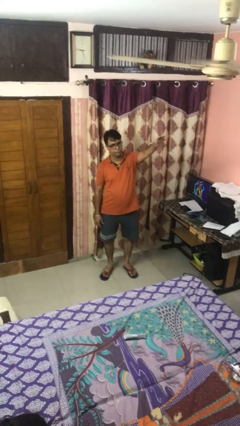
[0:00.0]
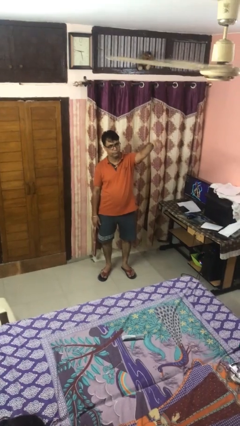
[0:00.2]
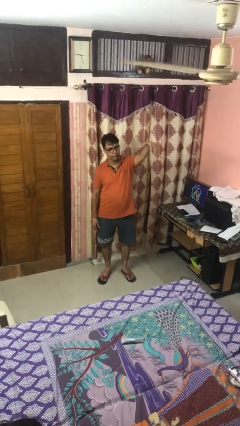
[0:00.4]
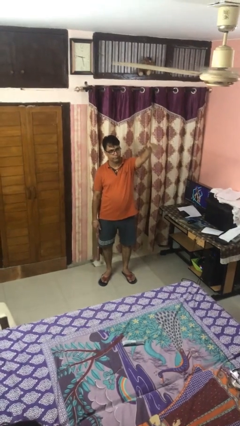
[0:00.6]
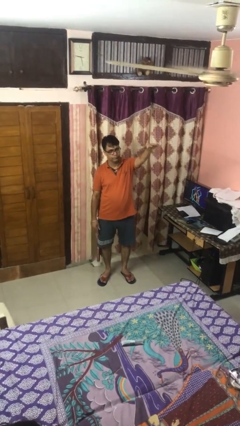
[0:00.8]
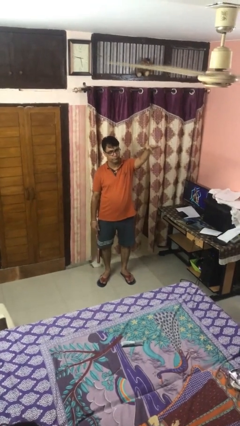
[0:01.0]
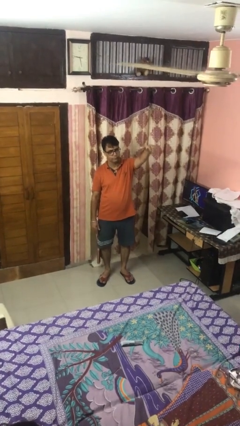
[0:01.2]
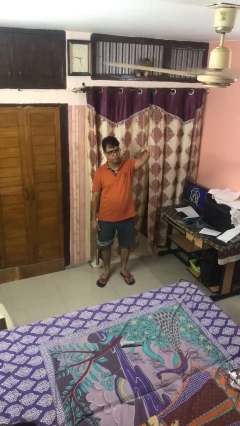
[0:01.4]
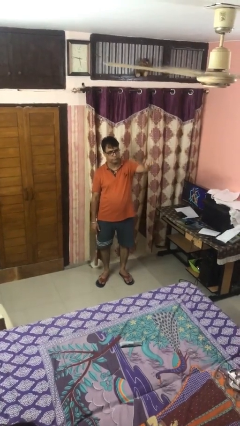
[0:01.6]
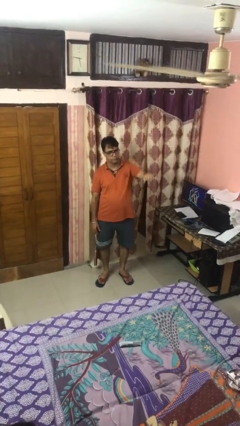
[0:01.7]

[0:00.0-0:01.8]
person gestures come here

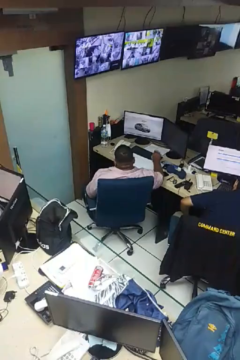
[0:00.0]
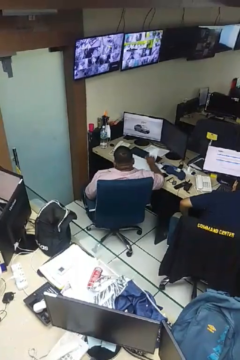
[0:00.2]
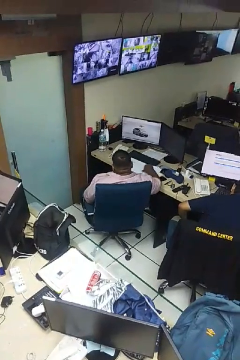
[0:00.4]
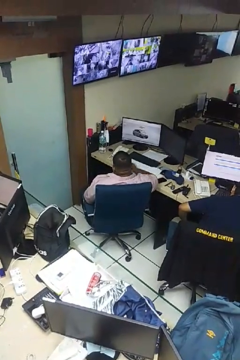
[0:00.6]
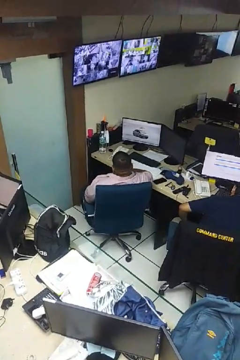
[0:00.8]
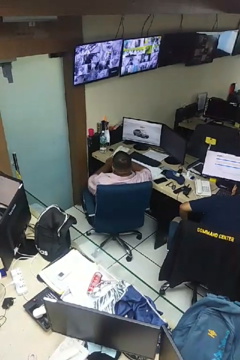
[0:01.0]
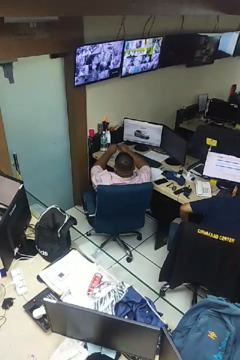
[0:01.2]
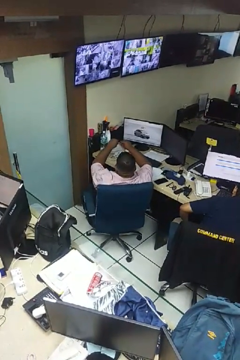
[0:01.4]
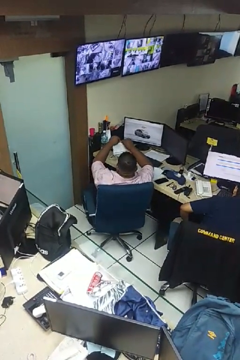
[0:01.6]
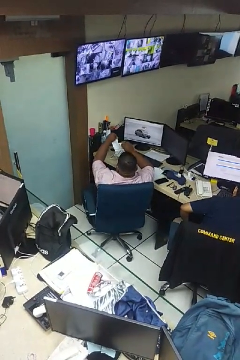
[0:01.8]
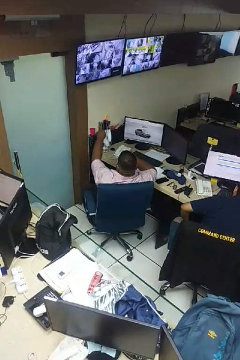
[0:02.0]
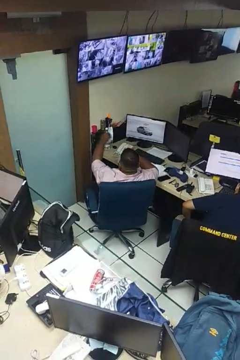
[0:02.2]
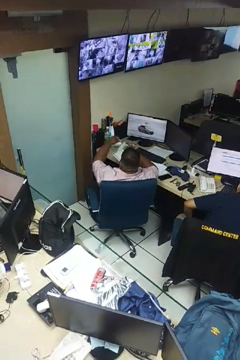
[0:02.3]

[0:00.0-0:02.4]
person tears paper

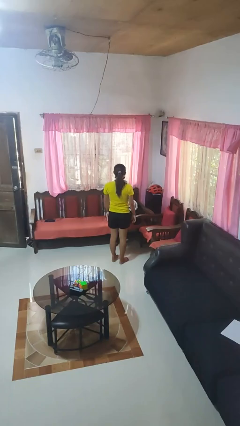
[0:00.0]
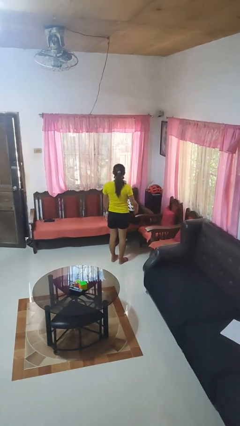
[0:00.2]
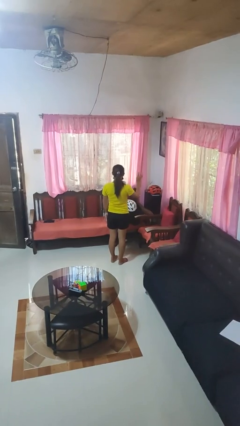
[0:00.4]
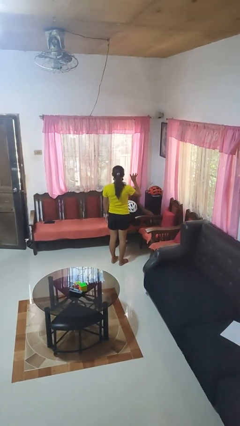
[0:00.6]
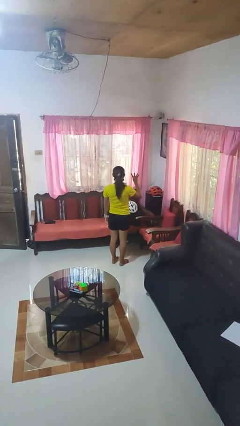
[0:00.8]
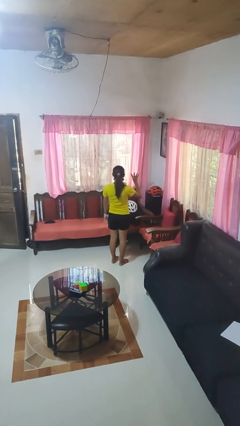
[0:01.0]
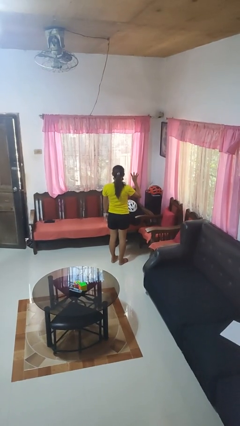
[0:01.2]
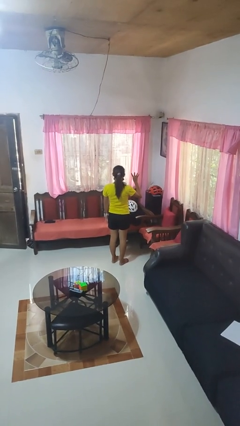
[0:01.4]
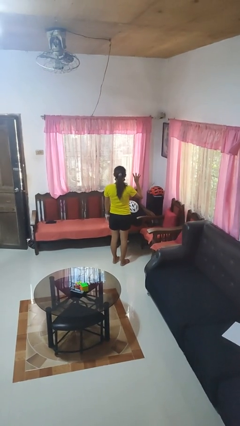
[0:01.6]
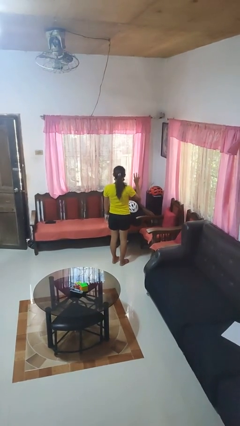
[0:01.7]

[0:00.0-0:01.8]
person gestures number four

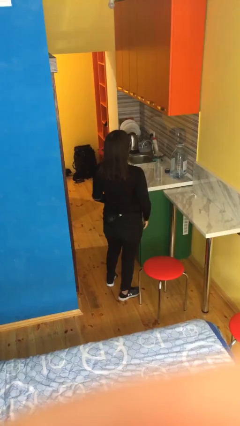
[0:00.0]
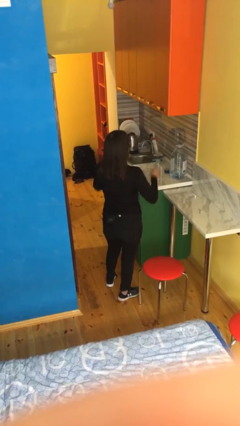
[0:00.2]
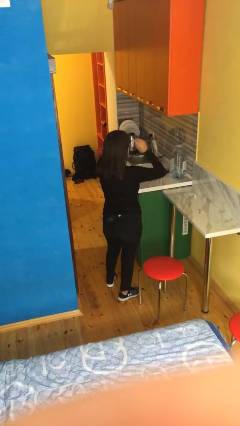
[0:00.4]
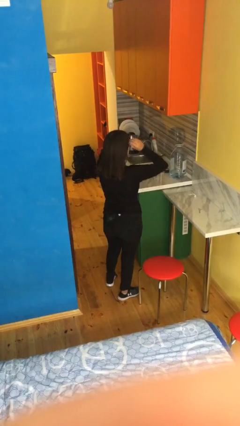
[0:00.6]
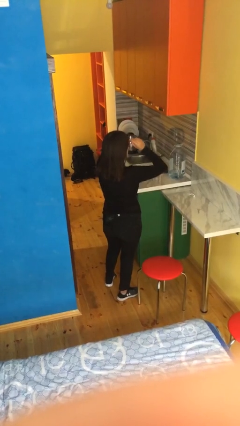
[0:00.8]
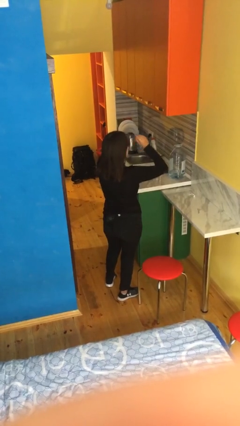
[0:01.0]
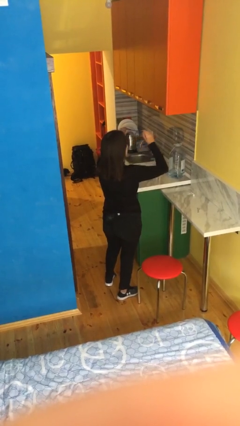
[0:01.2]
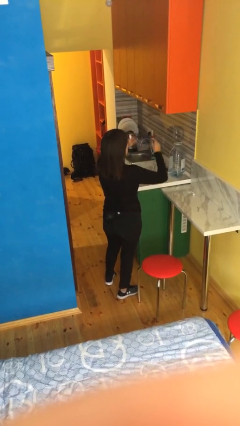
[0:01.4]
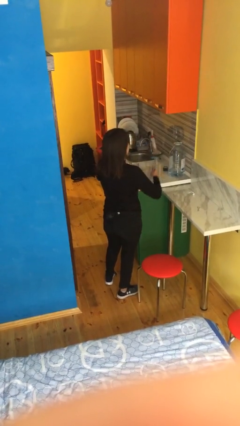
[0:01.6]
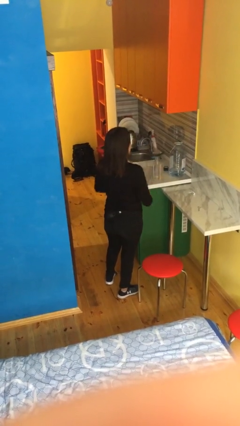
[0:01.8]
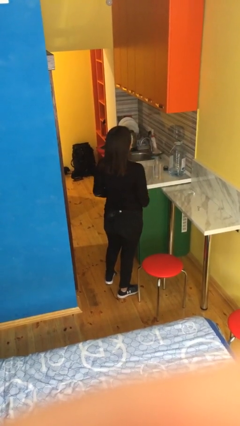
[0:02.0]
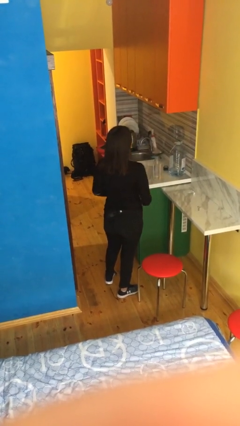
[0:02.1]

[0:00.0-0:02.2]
person takes off glasses

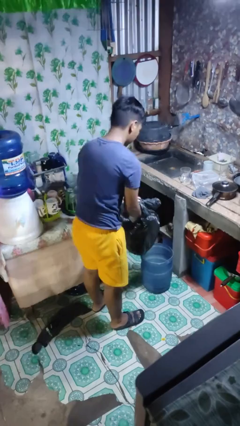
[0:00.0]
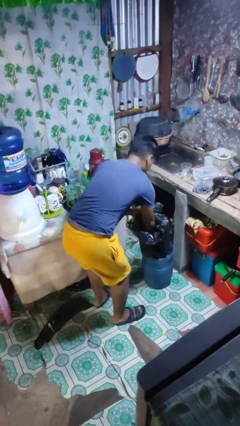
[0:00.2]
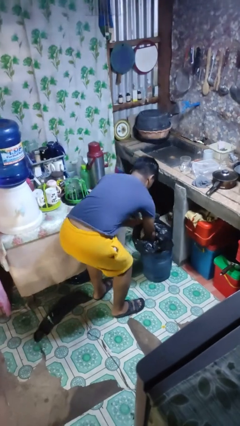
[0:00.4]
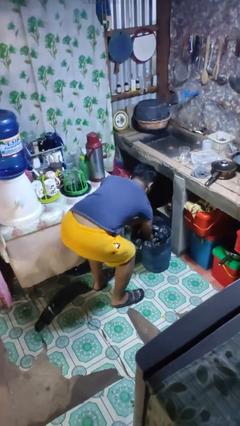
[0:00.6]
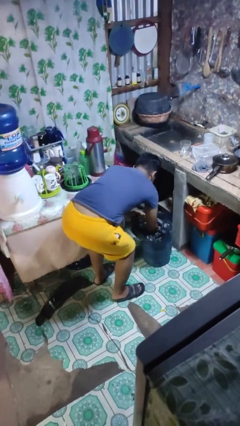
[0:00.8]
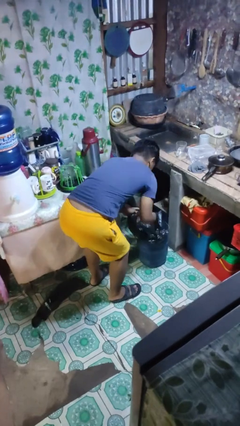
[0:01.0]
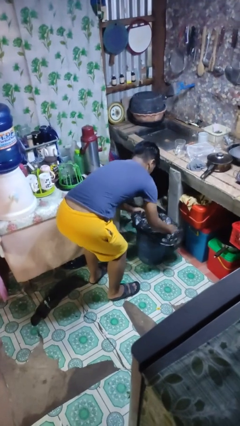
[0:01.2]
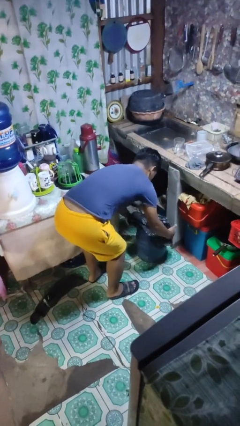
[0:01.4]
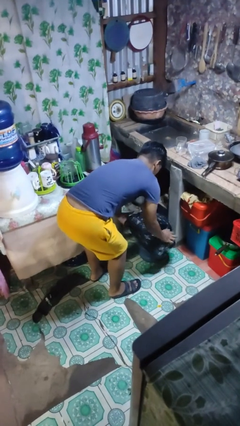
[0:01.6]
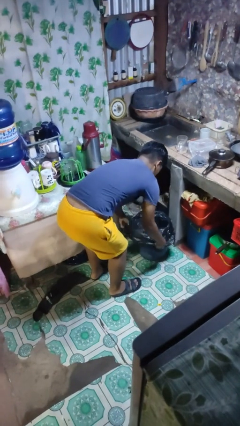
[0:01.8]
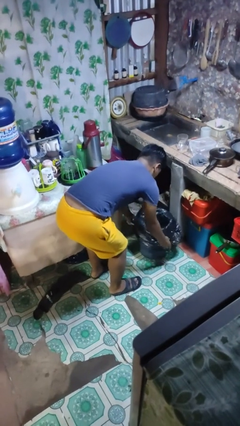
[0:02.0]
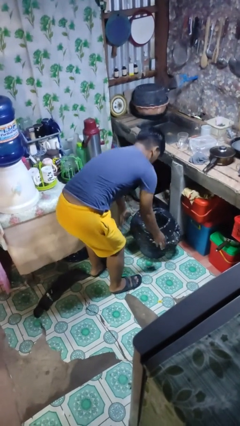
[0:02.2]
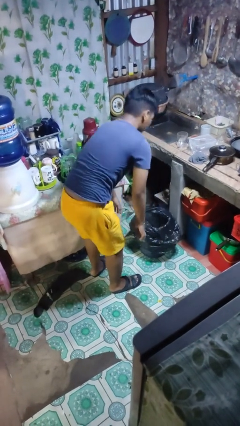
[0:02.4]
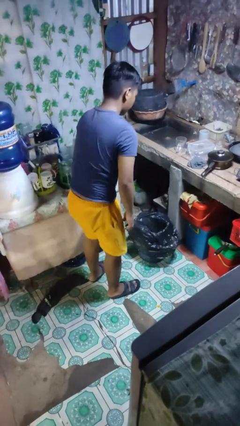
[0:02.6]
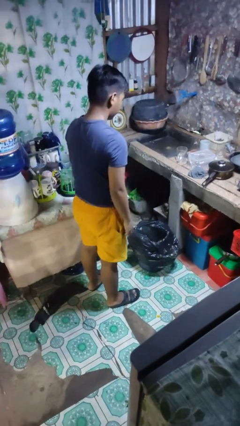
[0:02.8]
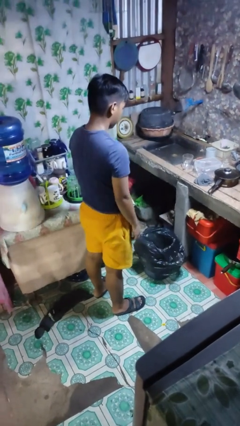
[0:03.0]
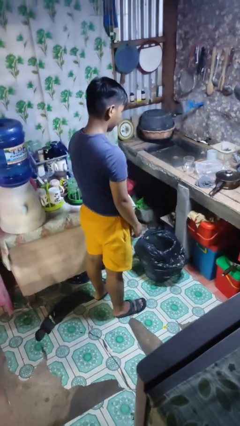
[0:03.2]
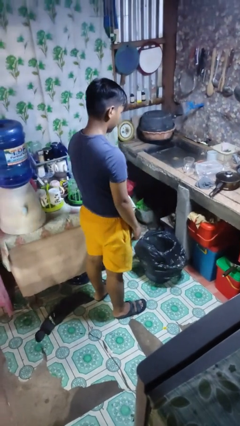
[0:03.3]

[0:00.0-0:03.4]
person inserts trashbag into trashcan

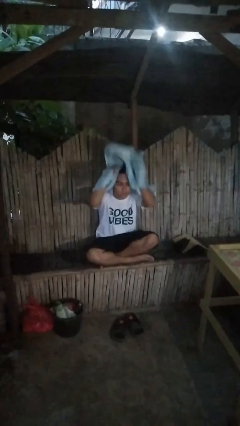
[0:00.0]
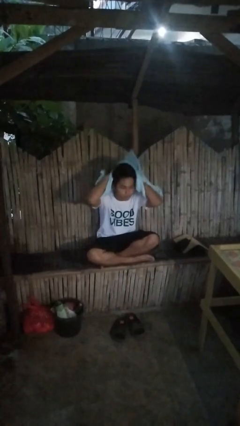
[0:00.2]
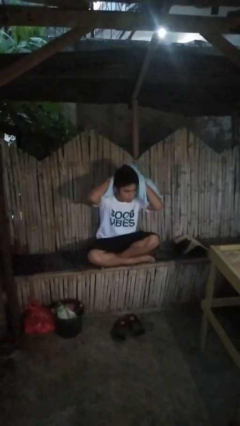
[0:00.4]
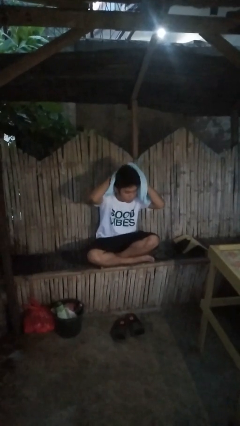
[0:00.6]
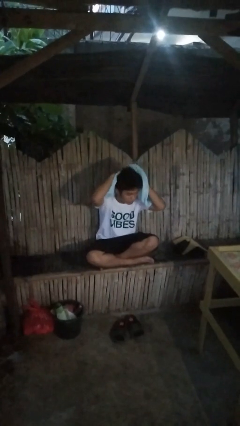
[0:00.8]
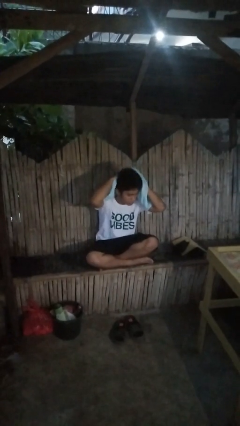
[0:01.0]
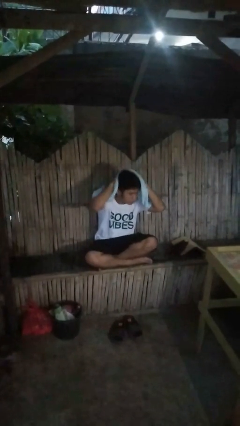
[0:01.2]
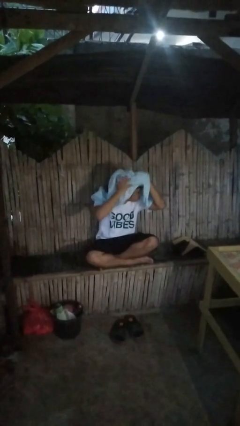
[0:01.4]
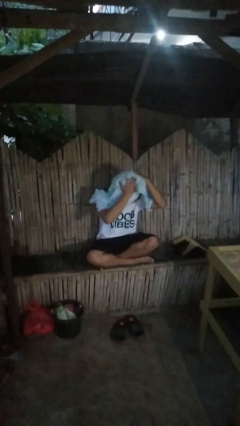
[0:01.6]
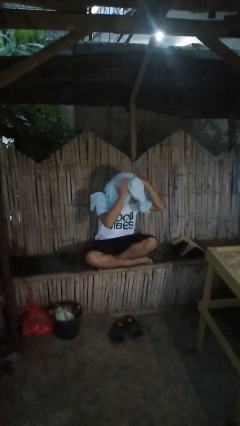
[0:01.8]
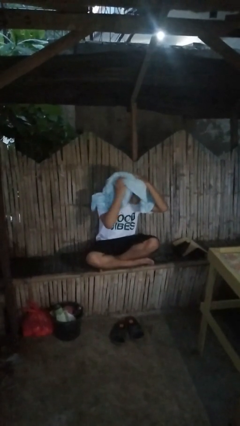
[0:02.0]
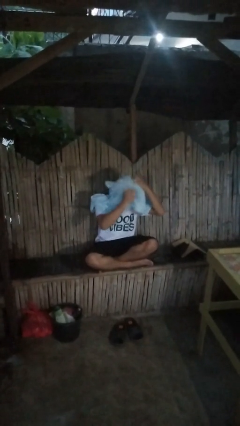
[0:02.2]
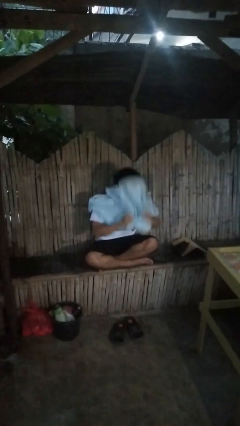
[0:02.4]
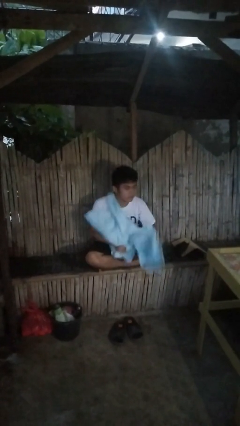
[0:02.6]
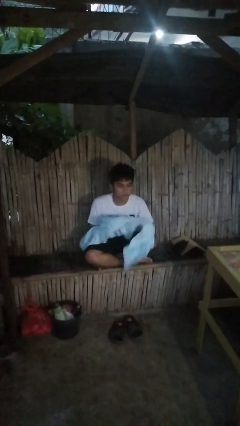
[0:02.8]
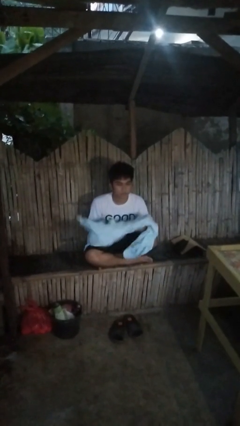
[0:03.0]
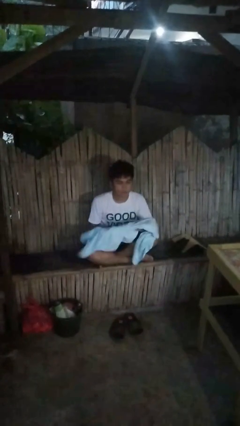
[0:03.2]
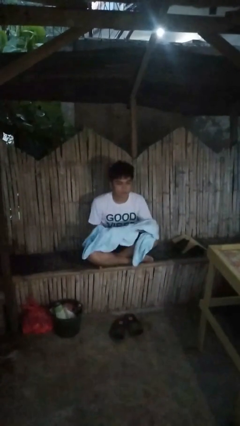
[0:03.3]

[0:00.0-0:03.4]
person dries hair with towel

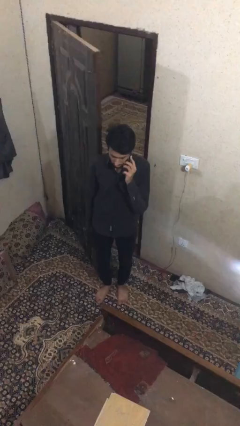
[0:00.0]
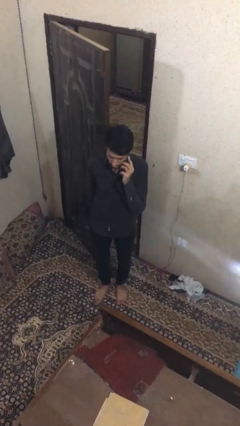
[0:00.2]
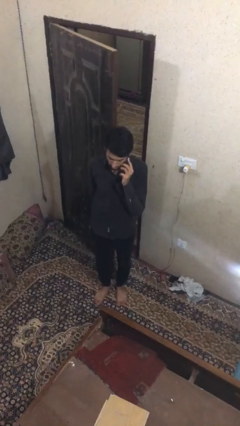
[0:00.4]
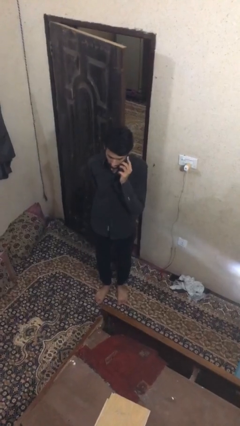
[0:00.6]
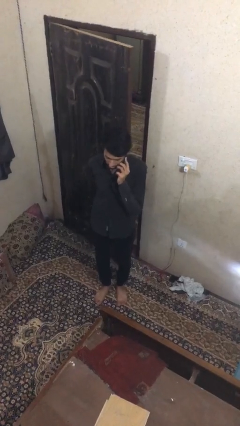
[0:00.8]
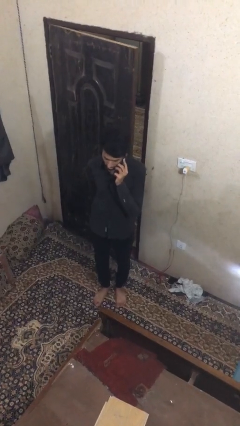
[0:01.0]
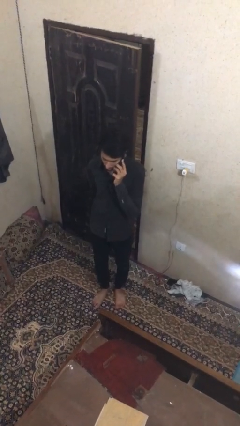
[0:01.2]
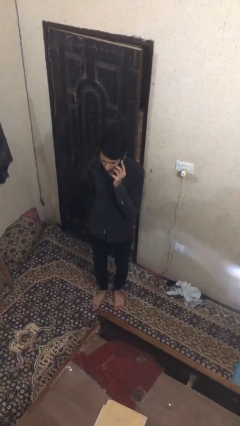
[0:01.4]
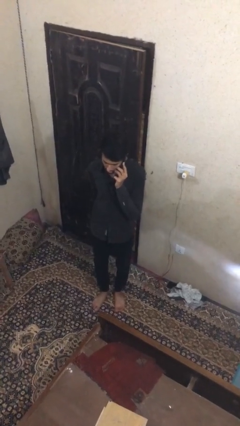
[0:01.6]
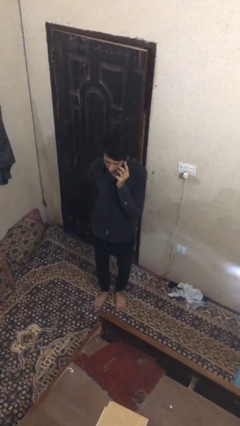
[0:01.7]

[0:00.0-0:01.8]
person closes facility door

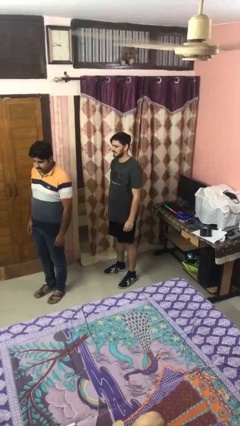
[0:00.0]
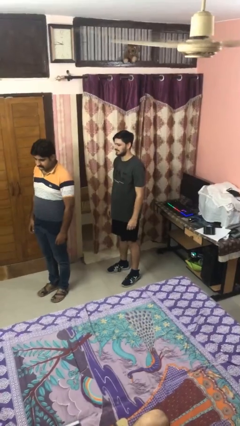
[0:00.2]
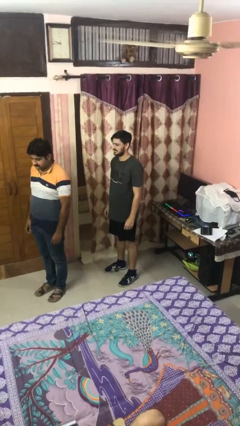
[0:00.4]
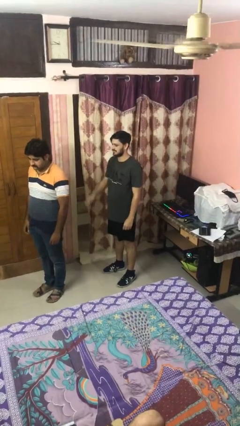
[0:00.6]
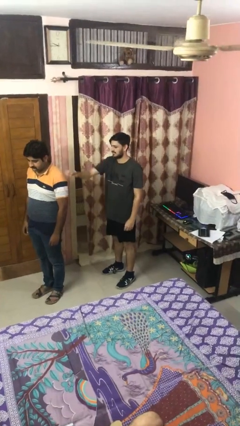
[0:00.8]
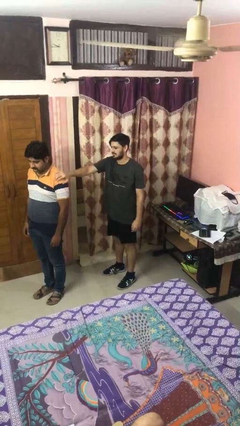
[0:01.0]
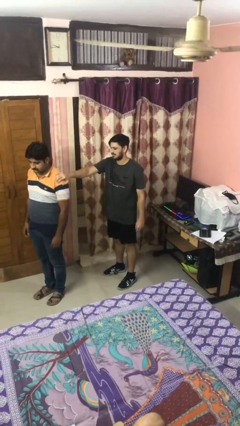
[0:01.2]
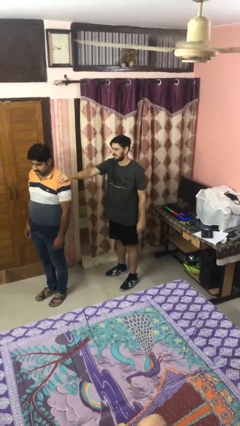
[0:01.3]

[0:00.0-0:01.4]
person grabs person by shoulder
